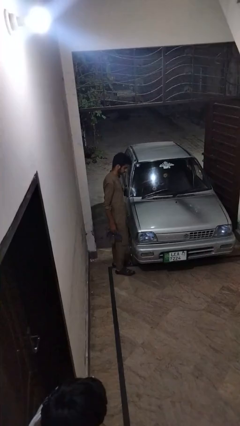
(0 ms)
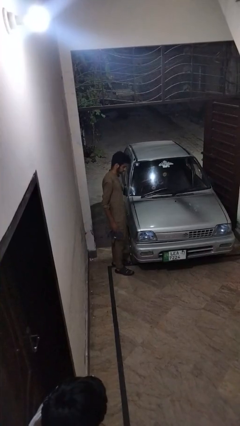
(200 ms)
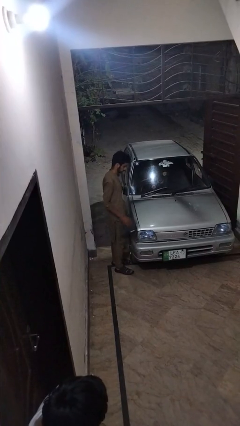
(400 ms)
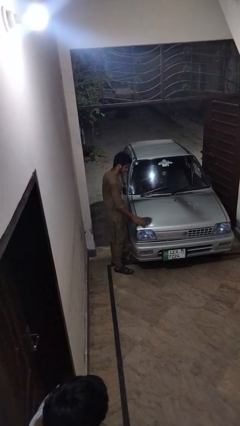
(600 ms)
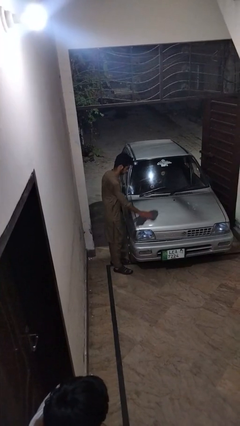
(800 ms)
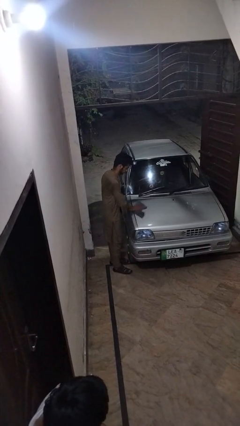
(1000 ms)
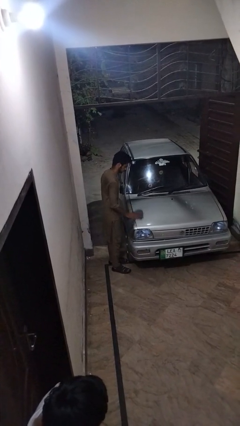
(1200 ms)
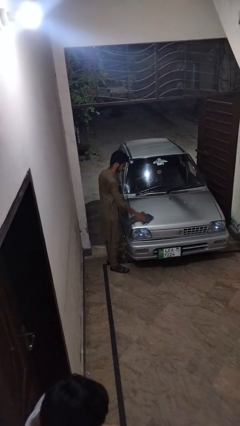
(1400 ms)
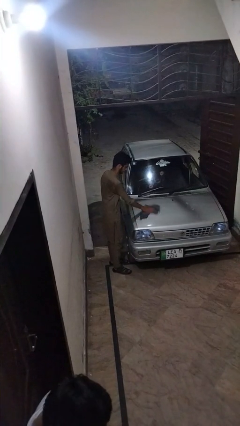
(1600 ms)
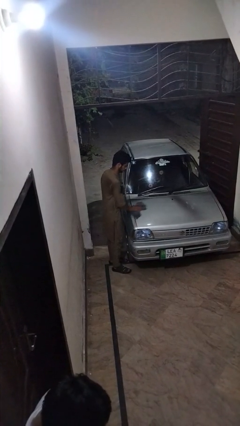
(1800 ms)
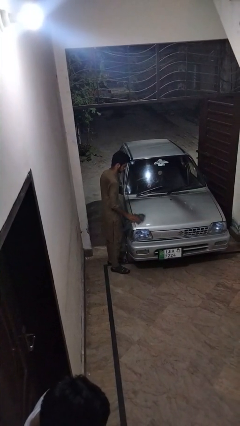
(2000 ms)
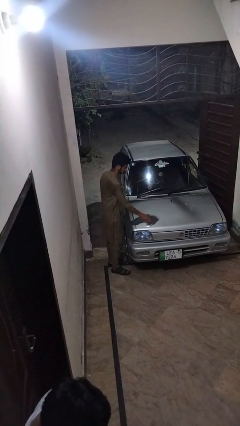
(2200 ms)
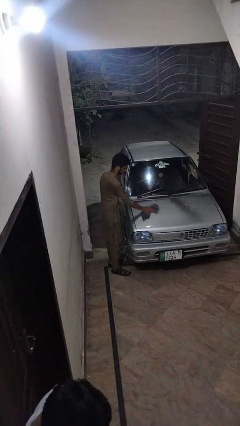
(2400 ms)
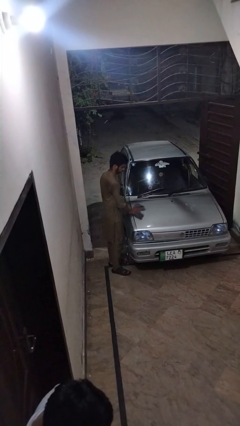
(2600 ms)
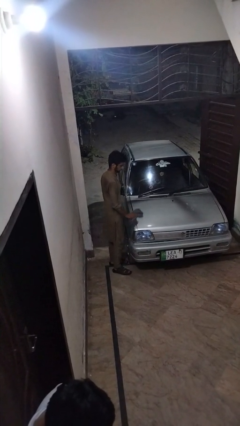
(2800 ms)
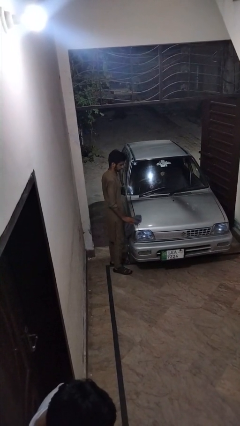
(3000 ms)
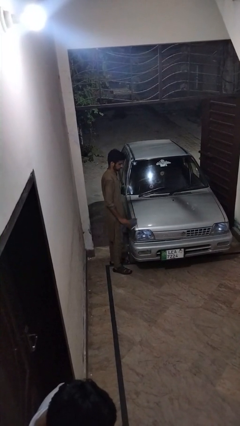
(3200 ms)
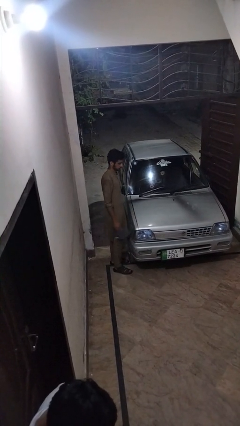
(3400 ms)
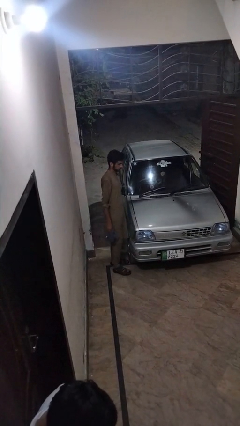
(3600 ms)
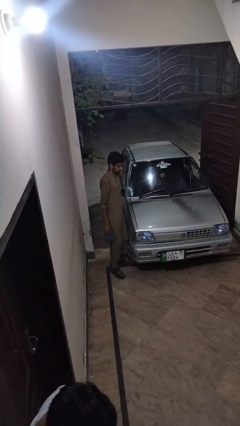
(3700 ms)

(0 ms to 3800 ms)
person polishes car with rag

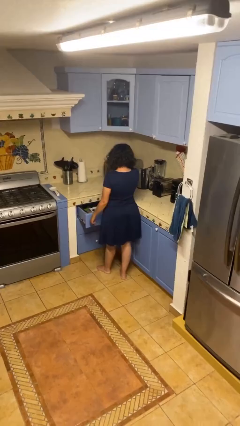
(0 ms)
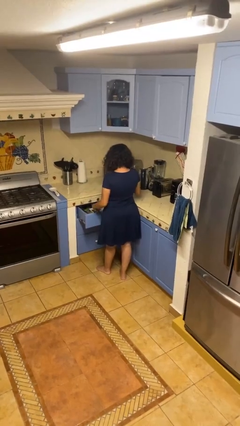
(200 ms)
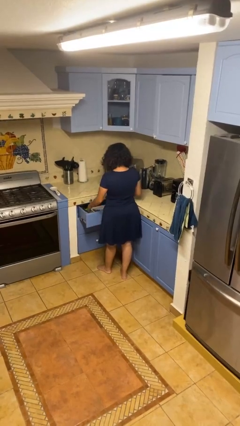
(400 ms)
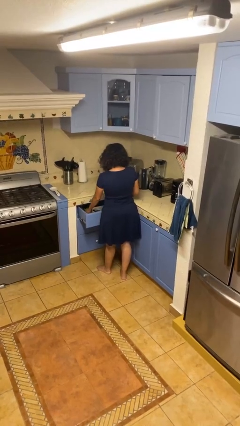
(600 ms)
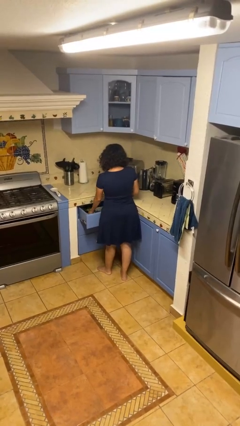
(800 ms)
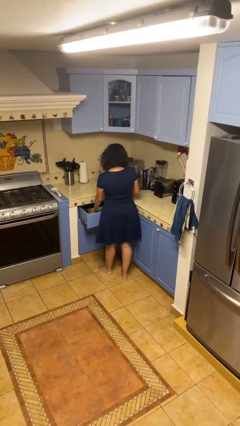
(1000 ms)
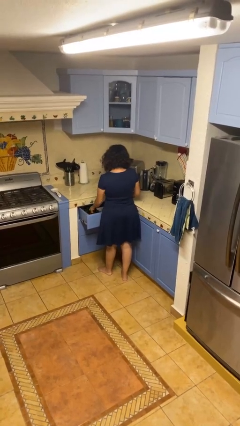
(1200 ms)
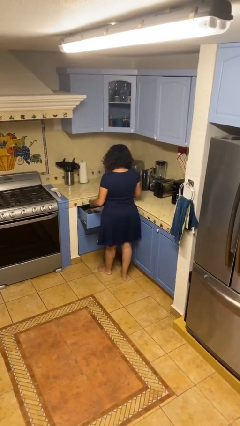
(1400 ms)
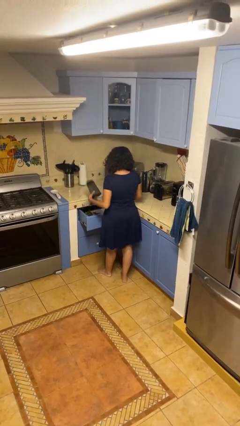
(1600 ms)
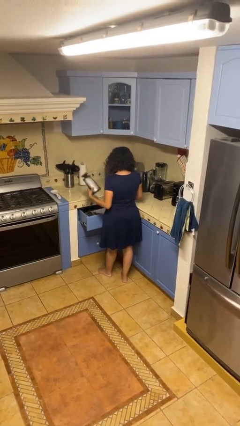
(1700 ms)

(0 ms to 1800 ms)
person takes object from kitchen drawer

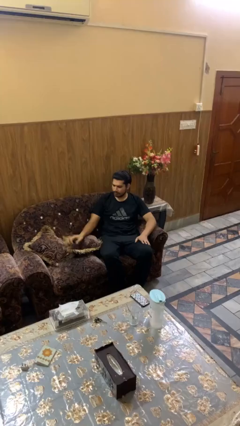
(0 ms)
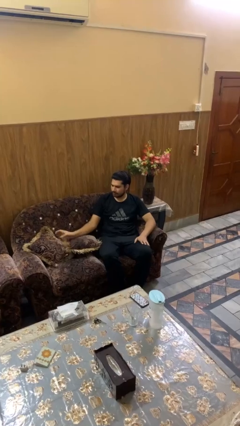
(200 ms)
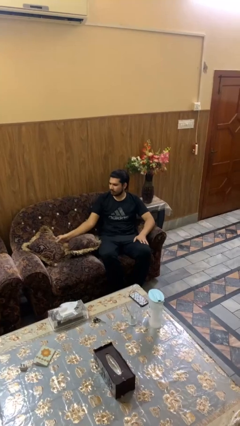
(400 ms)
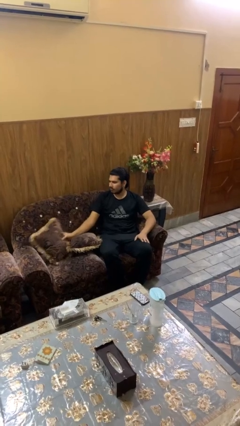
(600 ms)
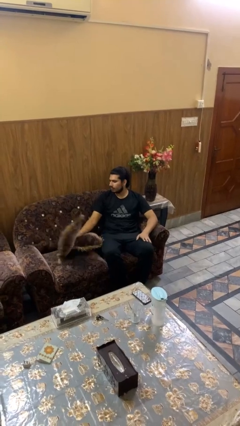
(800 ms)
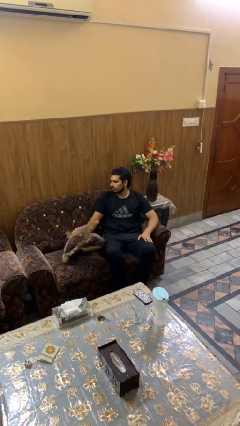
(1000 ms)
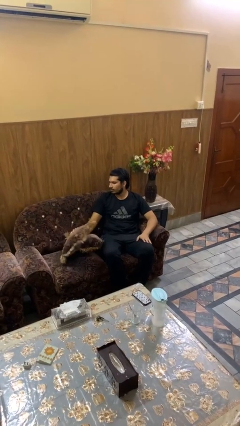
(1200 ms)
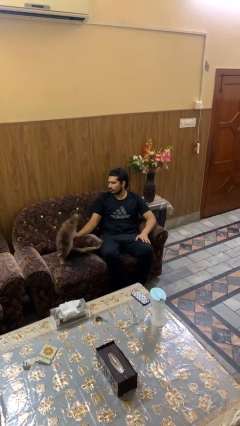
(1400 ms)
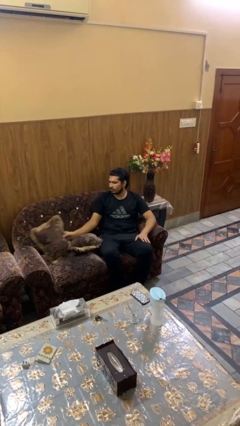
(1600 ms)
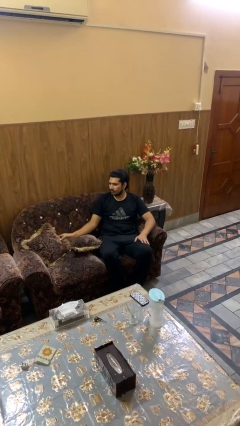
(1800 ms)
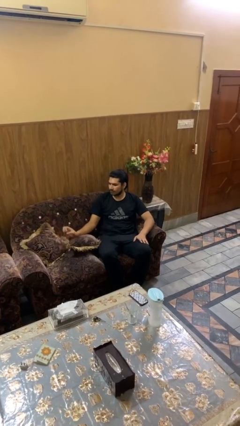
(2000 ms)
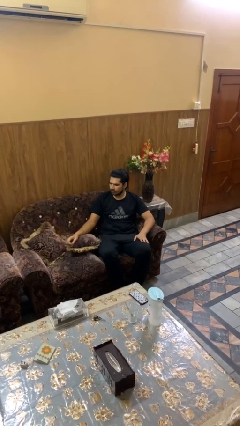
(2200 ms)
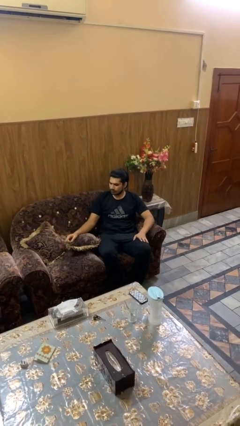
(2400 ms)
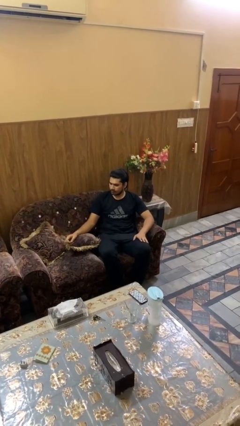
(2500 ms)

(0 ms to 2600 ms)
person searches in couch

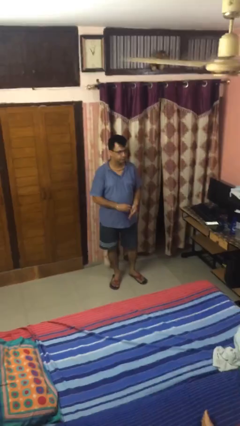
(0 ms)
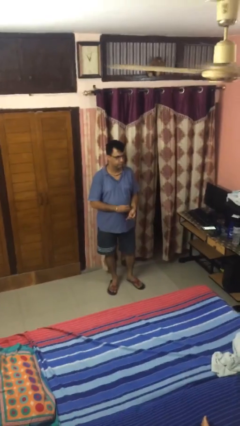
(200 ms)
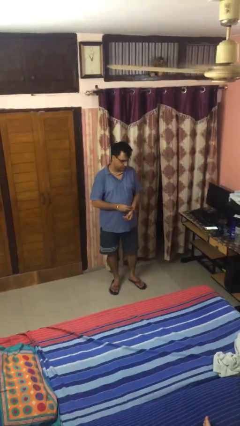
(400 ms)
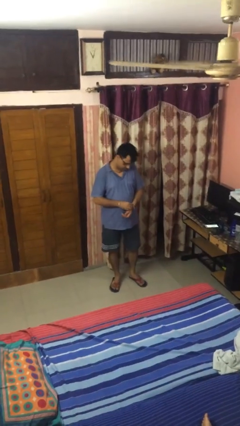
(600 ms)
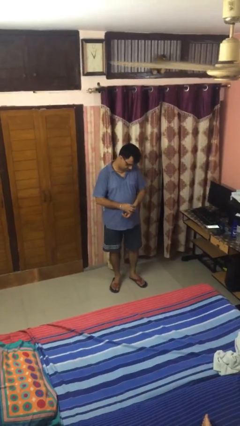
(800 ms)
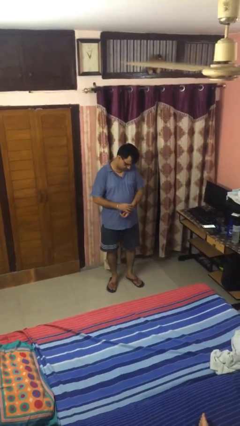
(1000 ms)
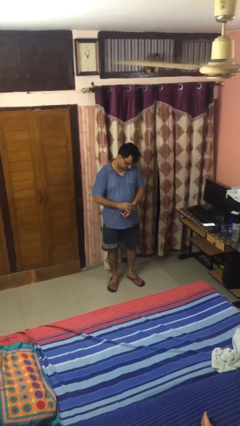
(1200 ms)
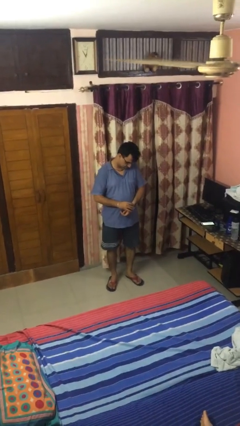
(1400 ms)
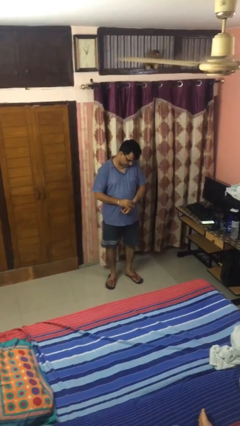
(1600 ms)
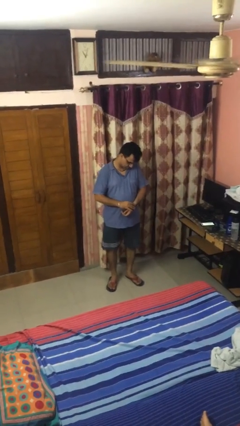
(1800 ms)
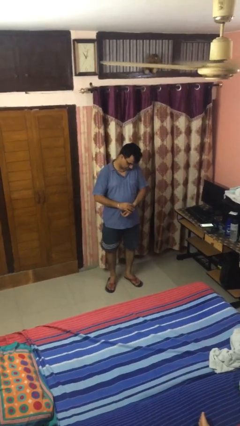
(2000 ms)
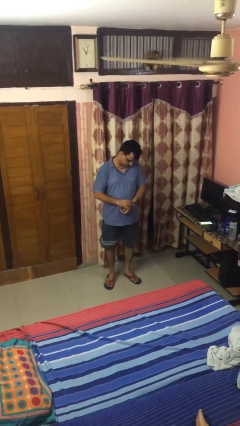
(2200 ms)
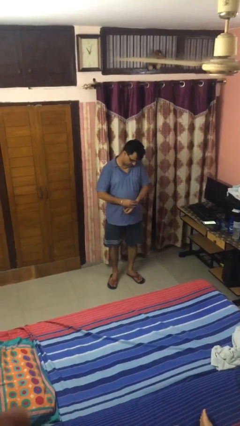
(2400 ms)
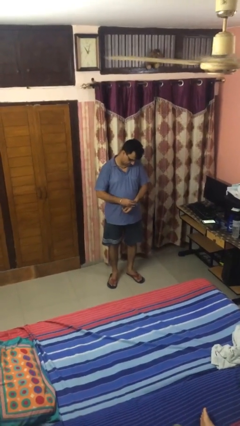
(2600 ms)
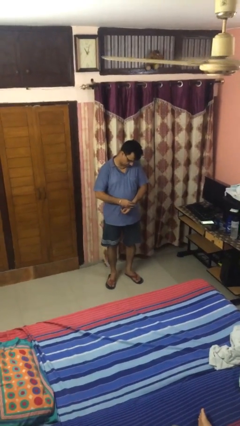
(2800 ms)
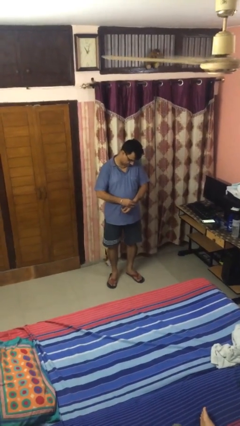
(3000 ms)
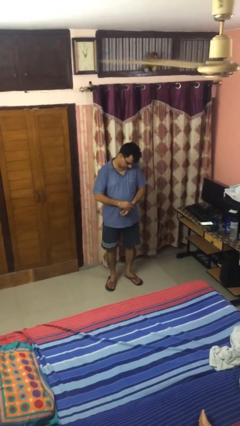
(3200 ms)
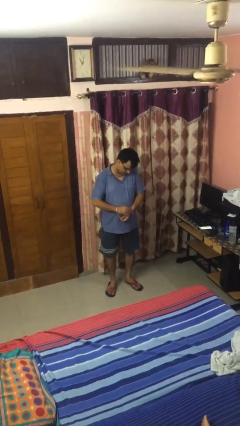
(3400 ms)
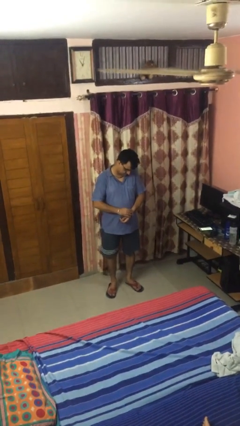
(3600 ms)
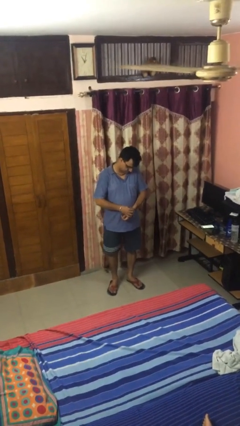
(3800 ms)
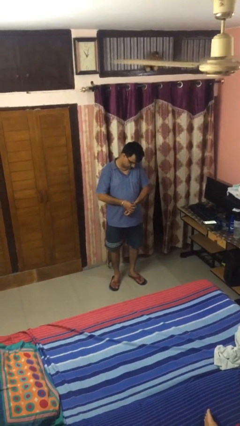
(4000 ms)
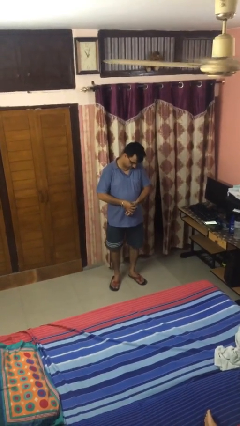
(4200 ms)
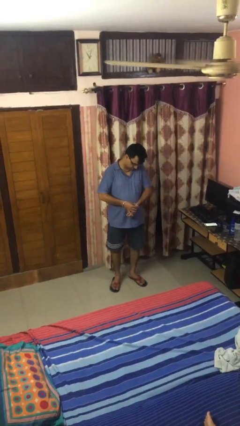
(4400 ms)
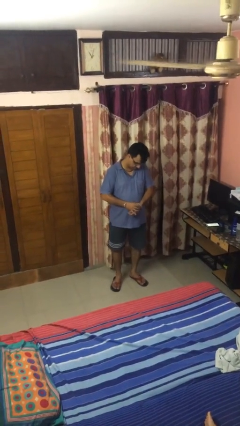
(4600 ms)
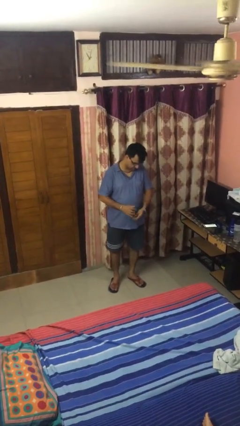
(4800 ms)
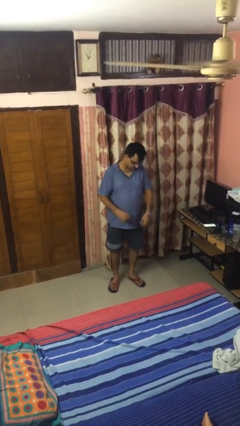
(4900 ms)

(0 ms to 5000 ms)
person puts on wristwatch

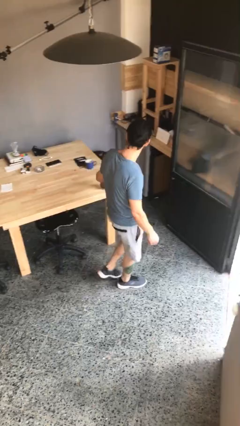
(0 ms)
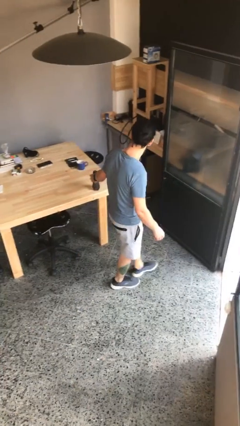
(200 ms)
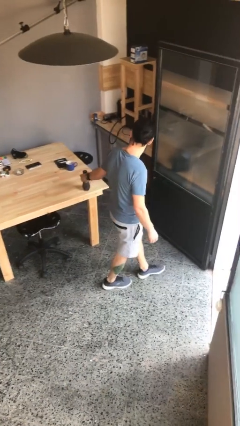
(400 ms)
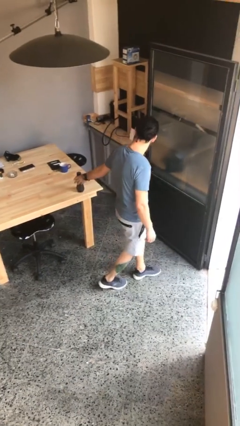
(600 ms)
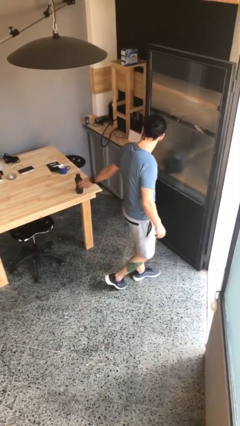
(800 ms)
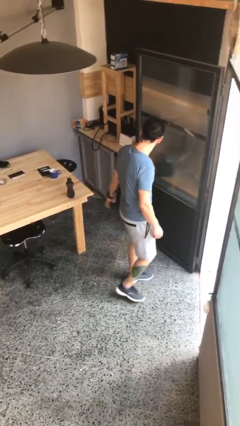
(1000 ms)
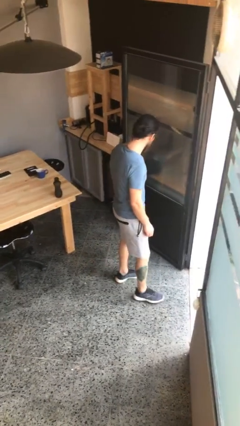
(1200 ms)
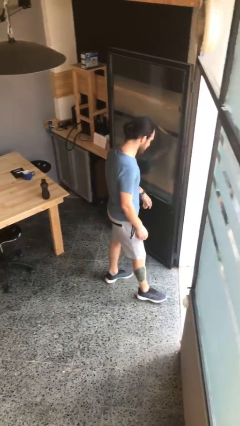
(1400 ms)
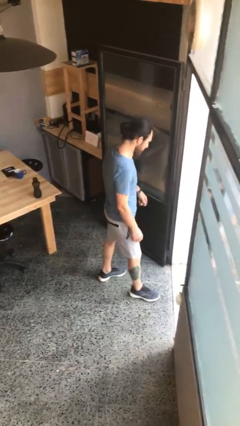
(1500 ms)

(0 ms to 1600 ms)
person puts down object on table

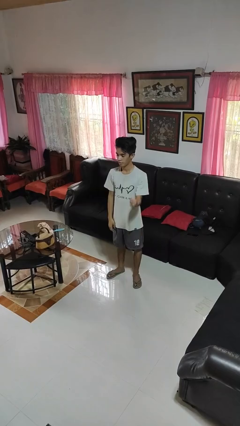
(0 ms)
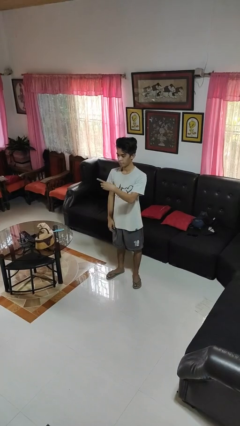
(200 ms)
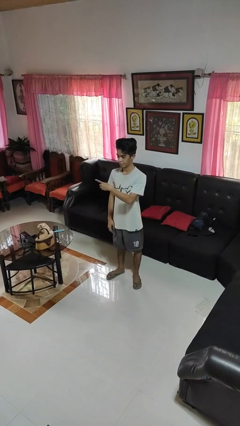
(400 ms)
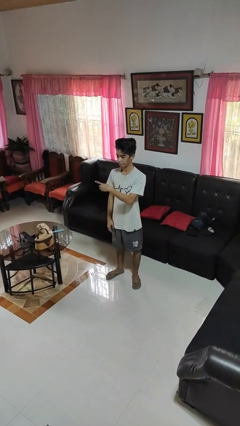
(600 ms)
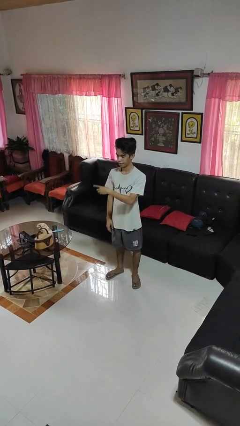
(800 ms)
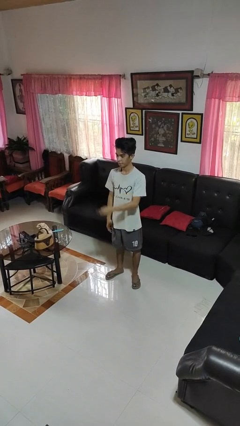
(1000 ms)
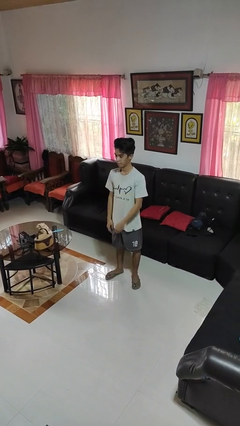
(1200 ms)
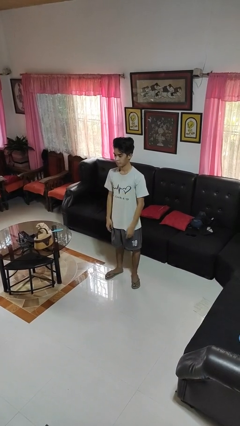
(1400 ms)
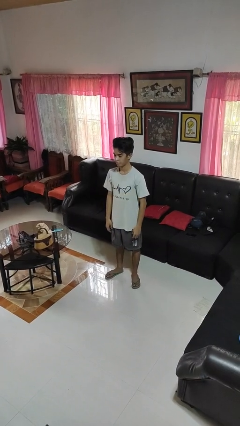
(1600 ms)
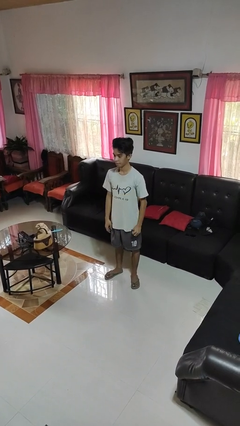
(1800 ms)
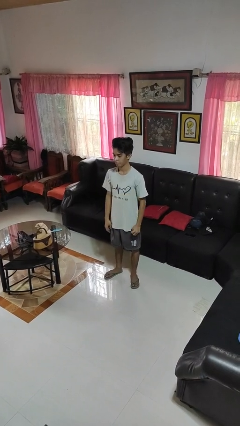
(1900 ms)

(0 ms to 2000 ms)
person gestures swipe right
